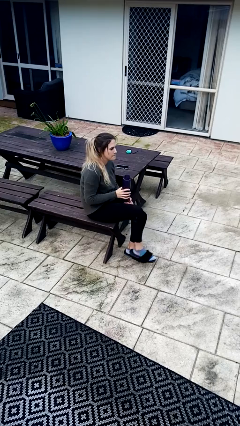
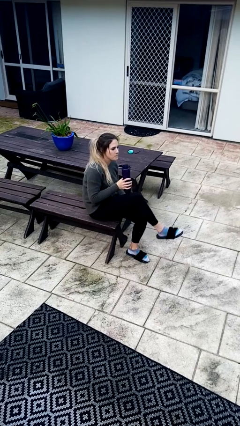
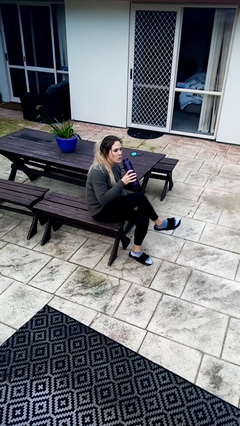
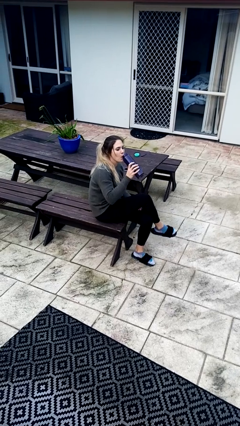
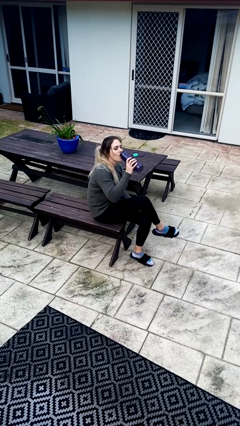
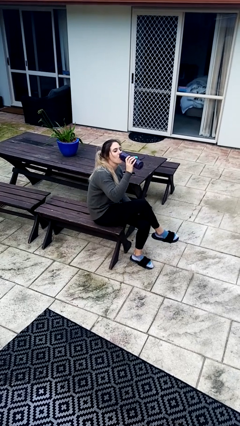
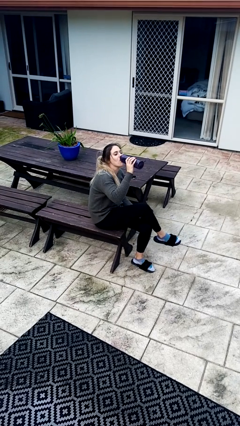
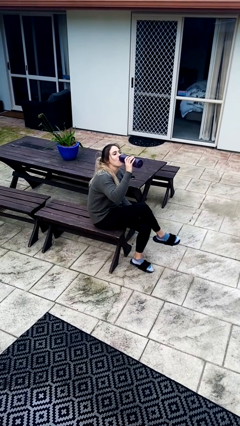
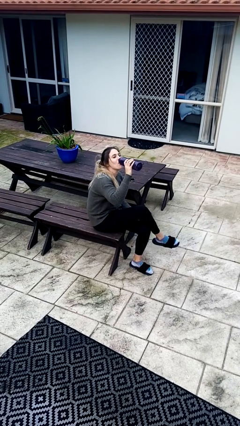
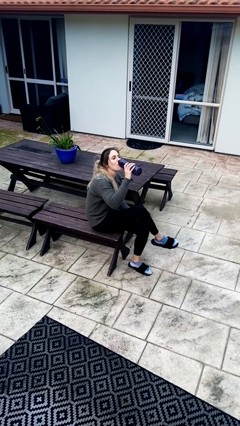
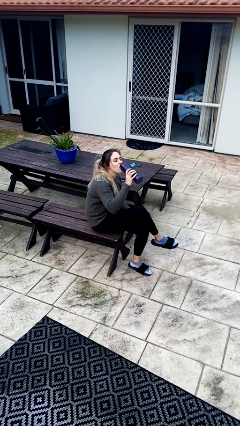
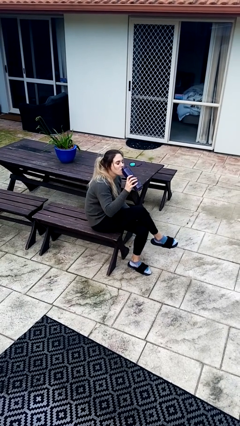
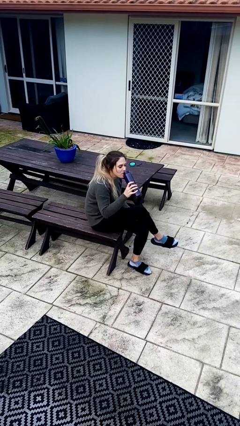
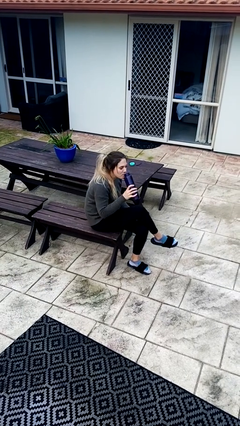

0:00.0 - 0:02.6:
person drinks from bottle

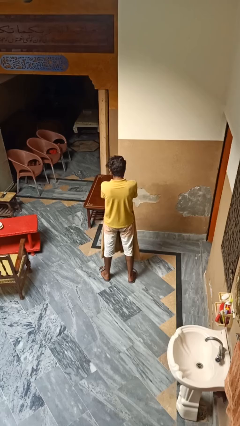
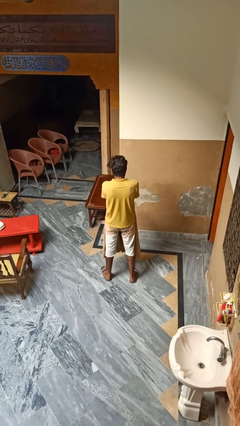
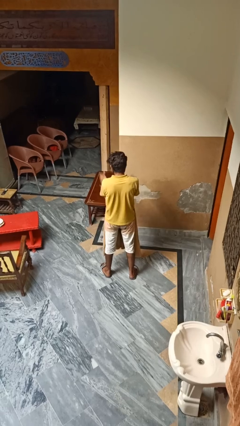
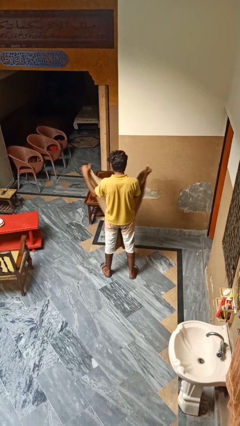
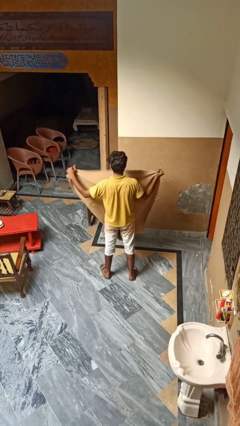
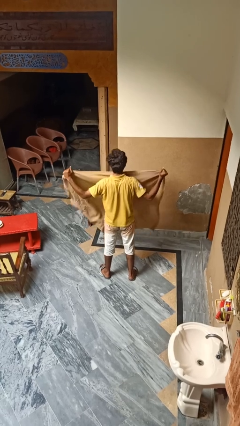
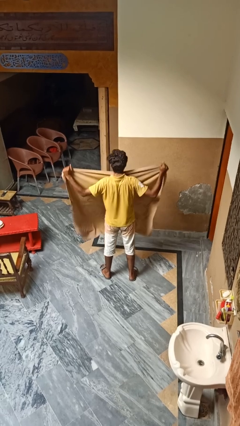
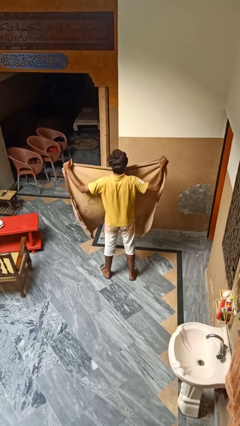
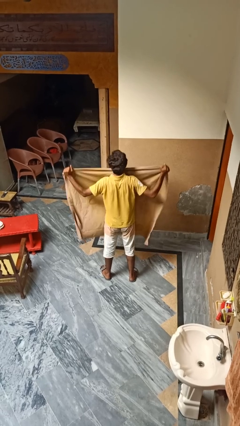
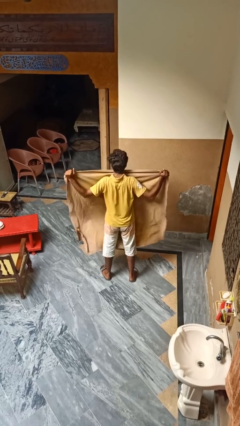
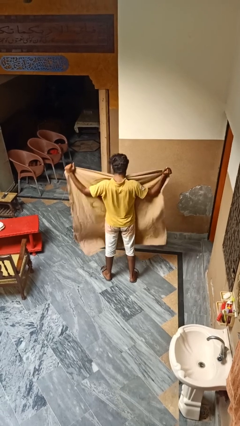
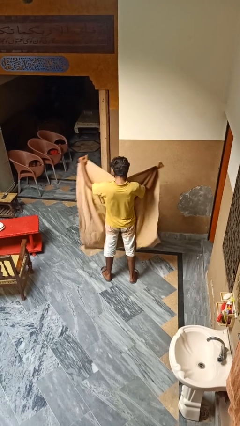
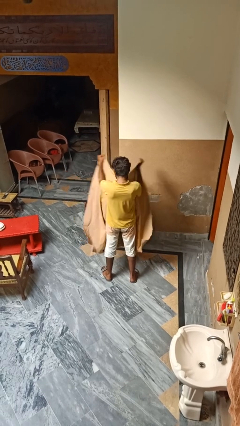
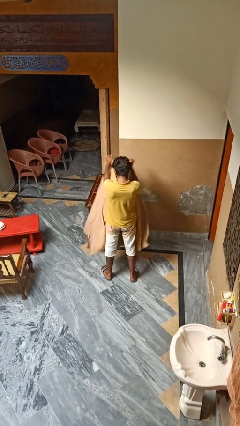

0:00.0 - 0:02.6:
person folds blanket

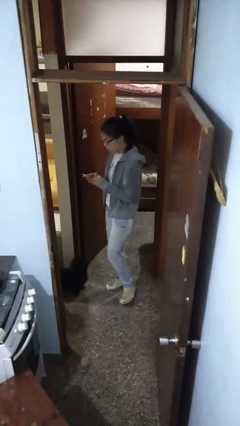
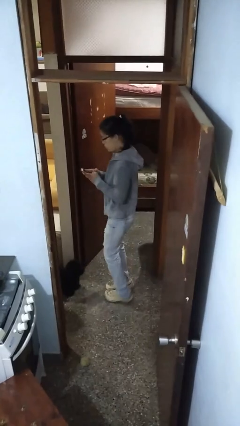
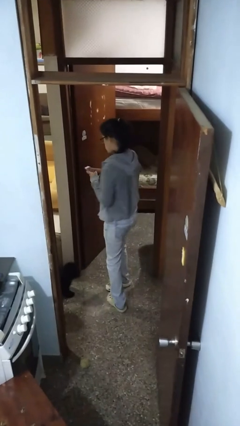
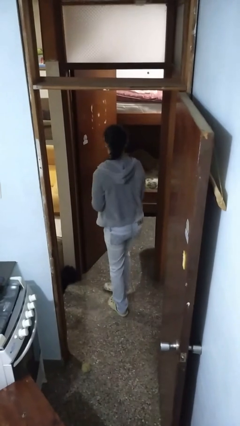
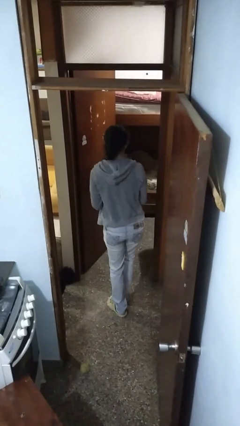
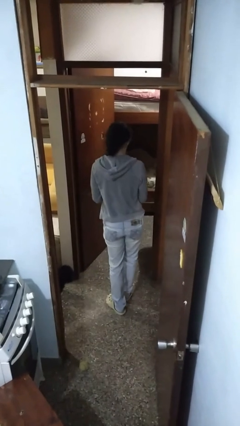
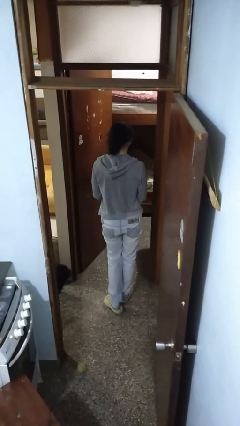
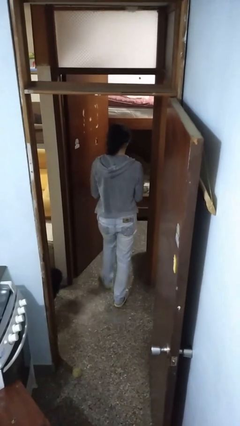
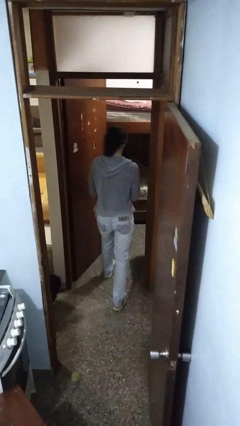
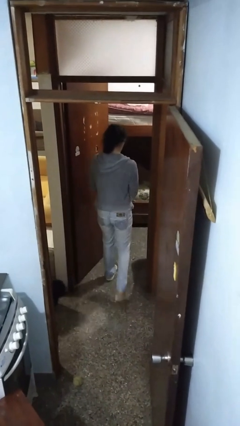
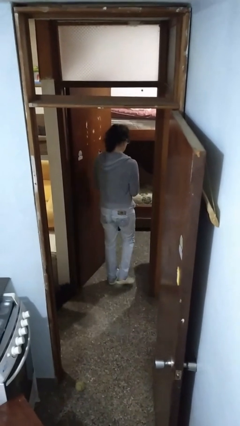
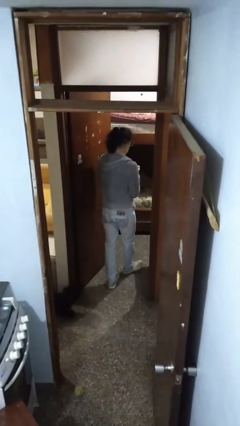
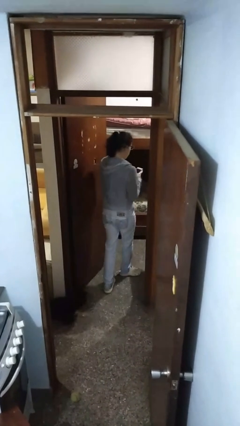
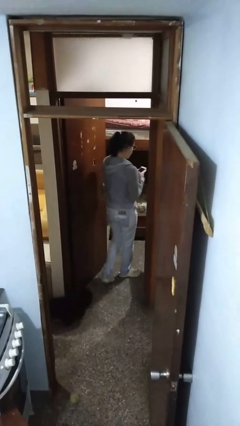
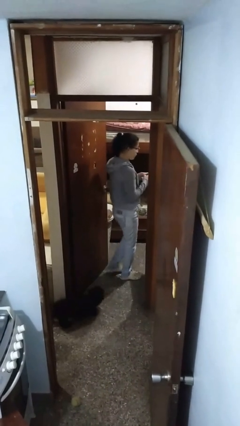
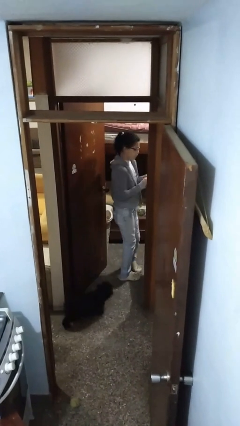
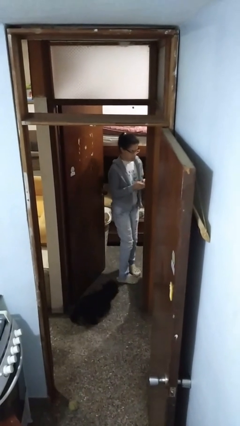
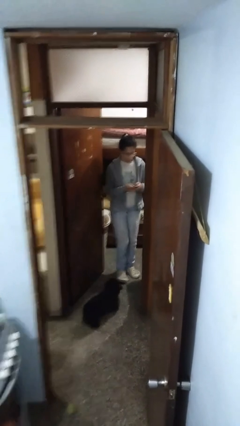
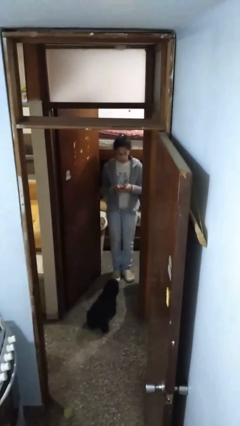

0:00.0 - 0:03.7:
person exits scene through structure

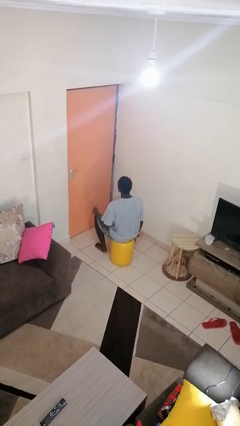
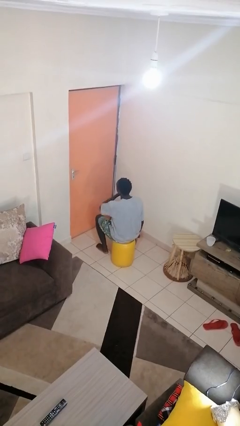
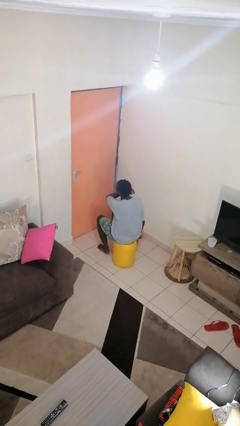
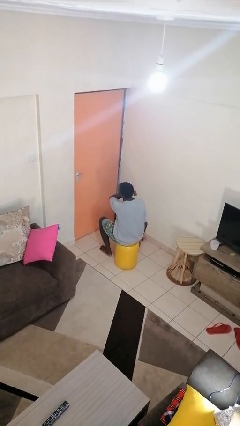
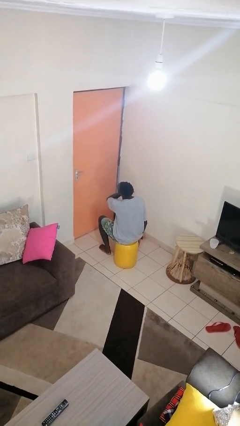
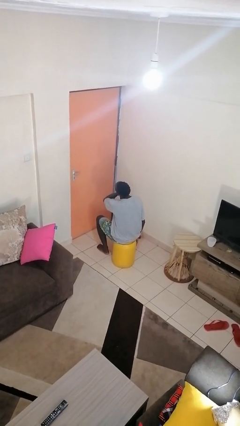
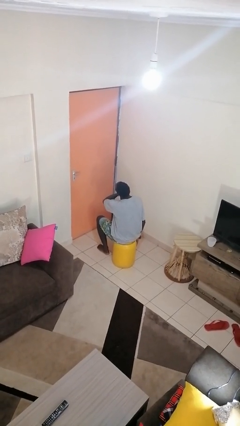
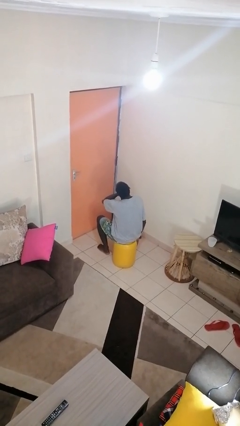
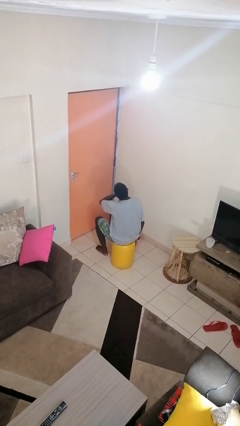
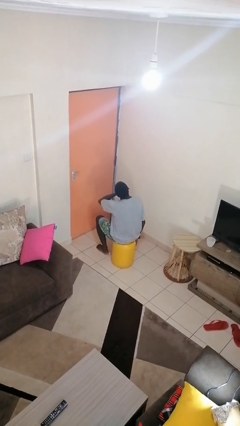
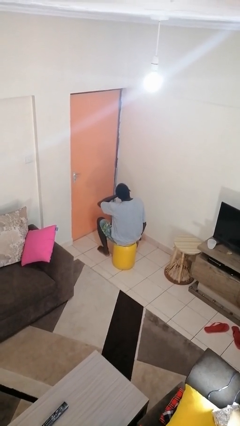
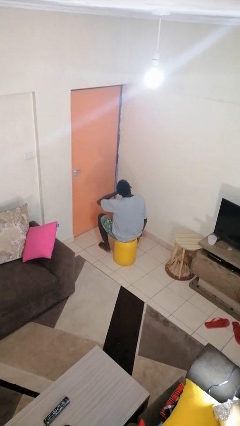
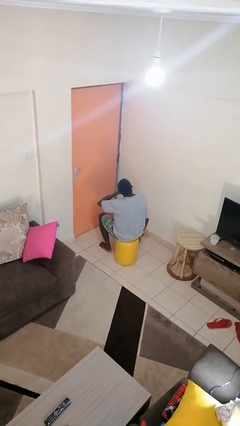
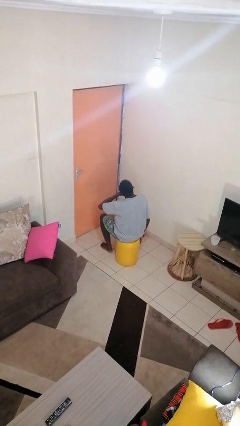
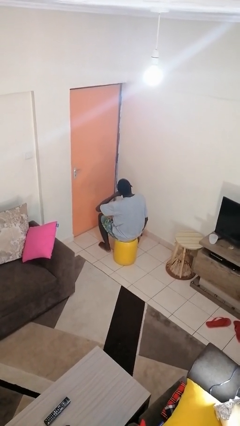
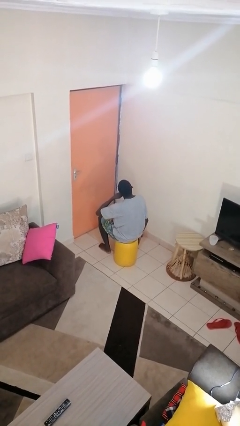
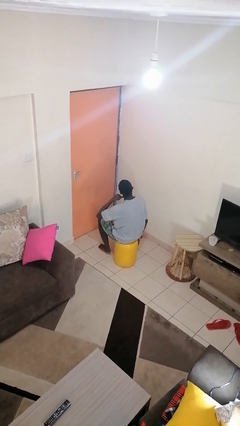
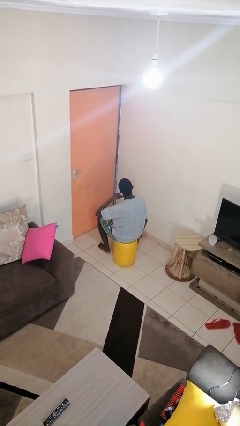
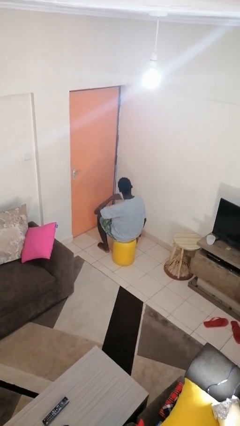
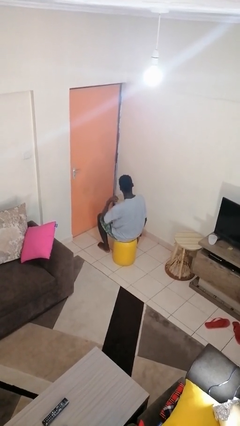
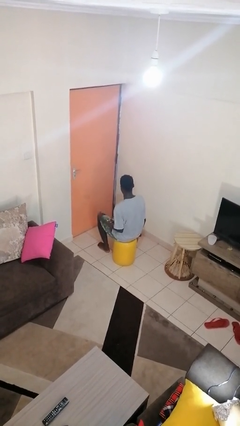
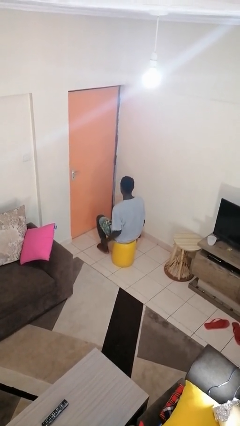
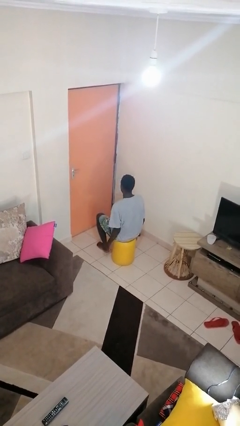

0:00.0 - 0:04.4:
person gestures cut

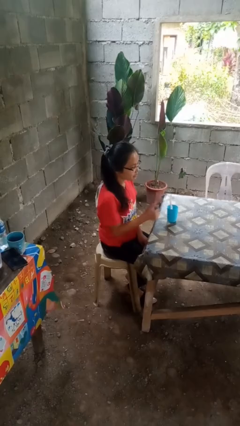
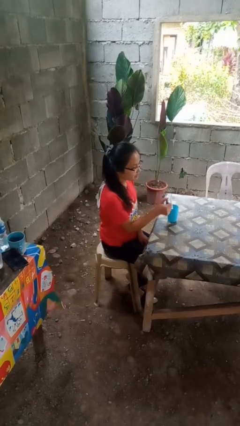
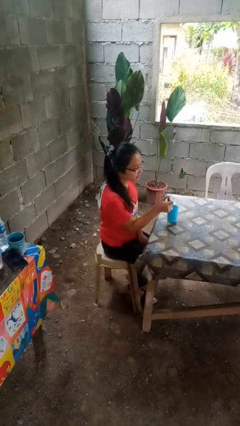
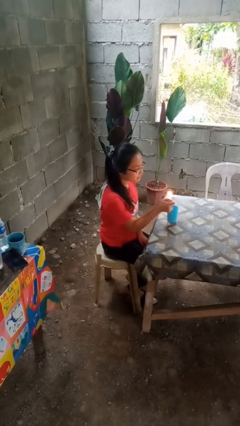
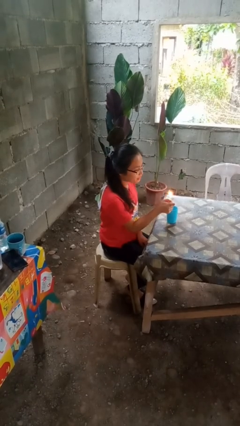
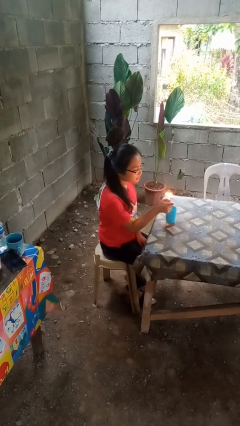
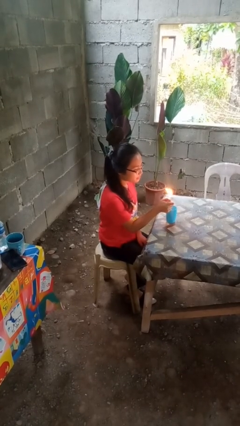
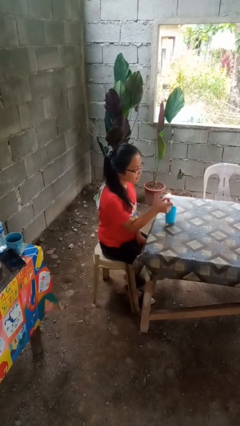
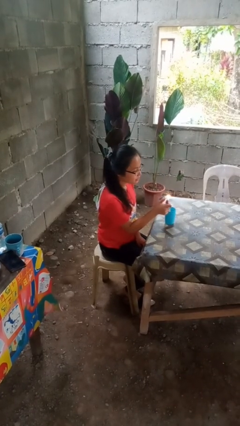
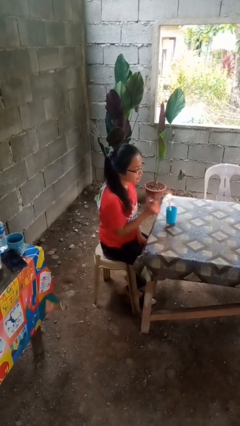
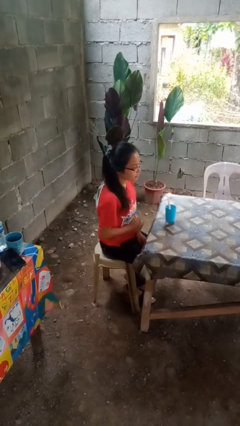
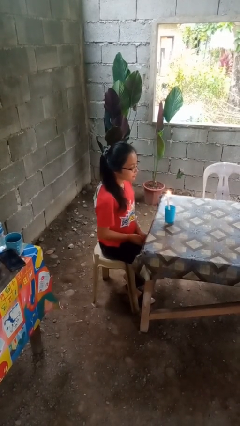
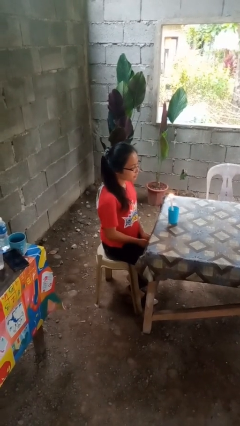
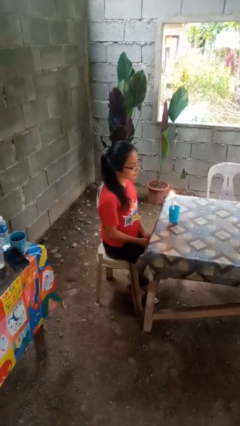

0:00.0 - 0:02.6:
person lights candle

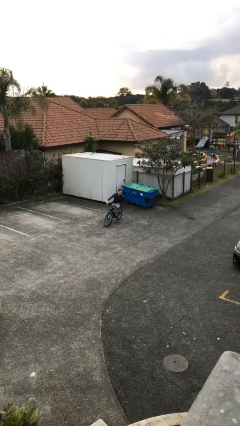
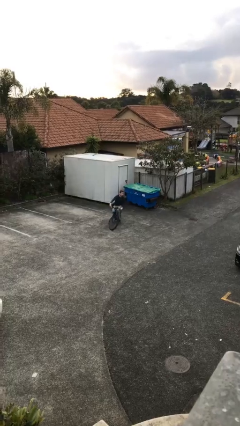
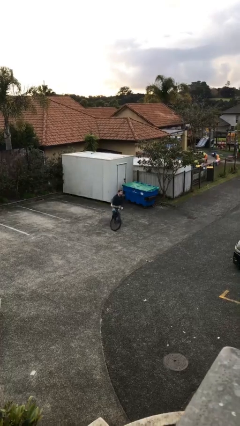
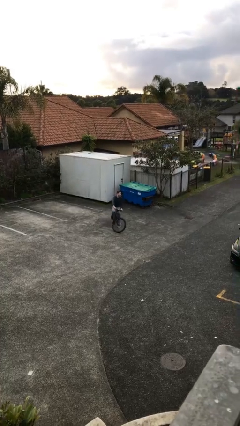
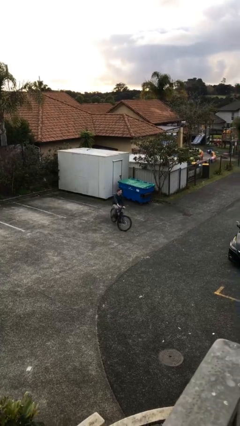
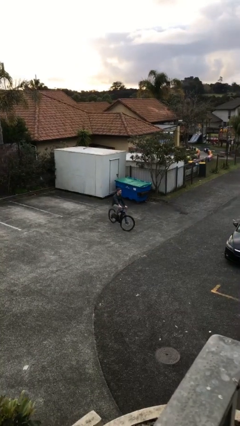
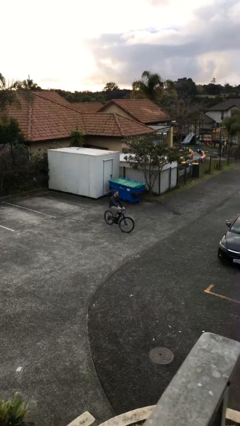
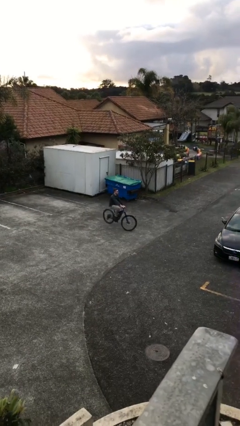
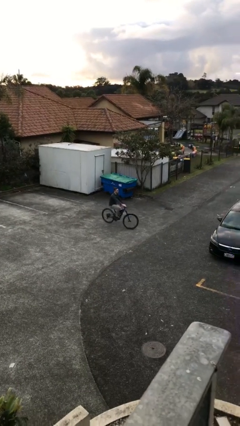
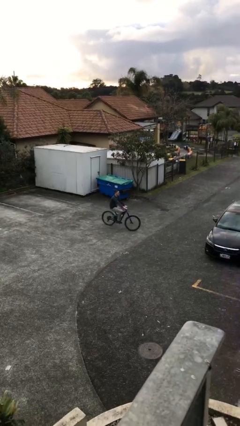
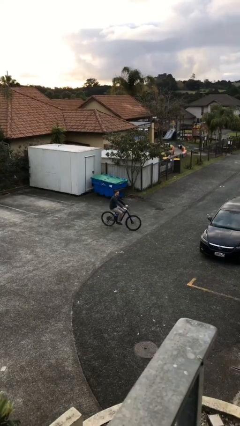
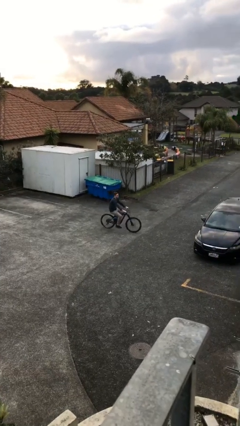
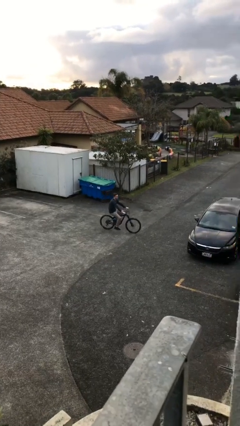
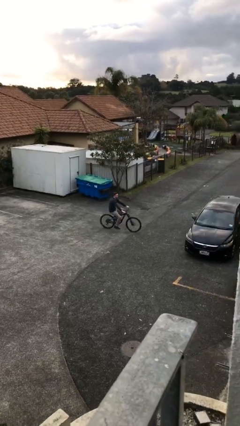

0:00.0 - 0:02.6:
person rides bicycle
